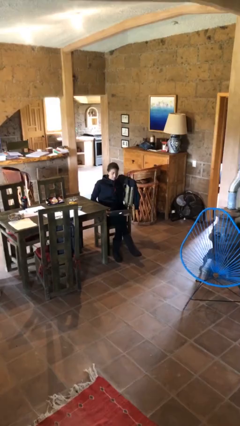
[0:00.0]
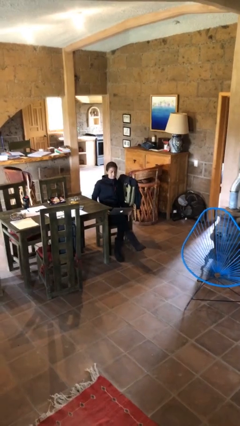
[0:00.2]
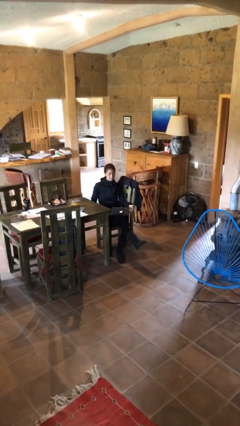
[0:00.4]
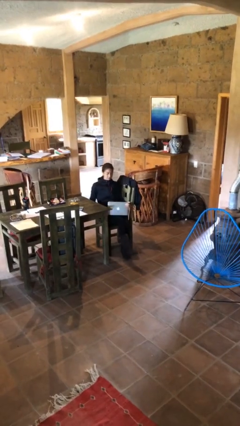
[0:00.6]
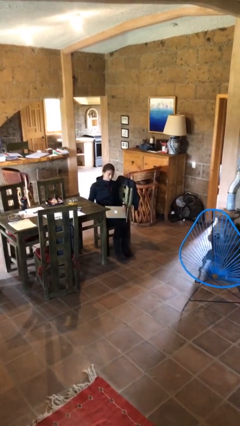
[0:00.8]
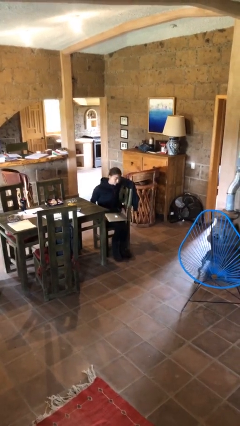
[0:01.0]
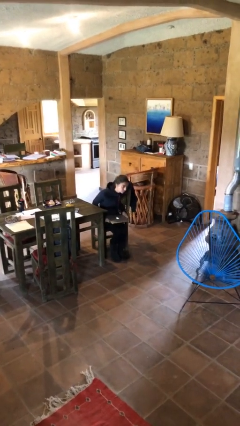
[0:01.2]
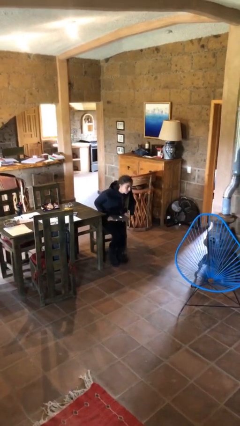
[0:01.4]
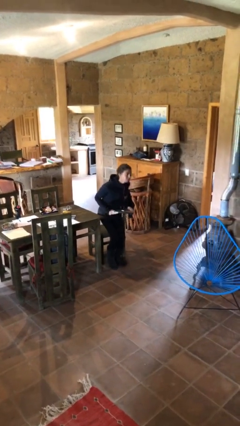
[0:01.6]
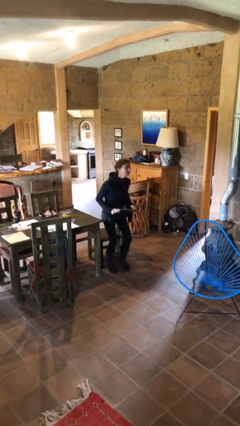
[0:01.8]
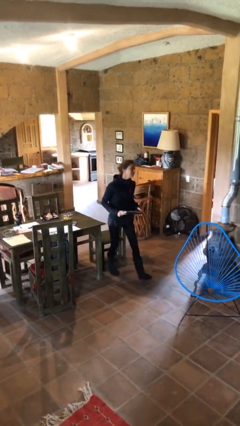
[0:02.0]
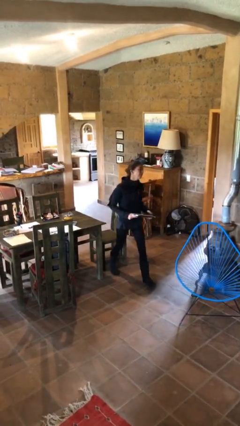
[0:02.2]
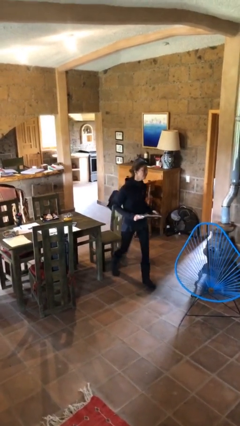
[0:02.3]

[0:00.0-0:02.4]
person stands up

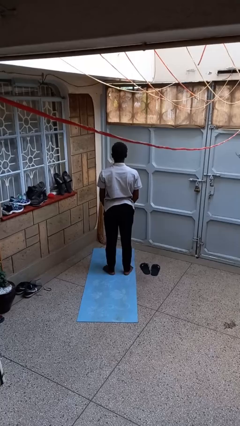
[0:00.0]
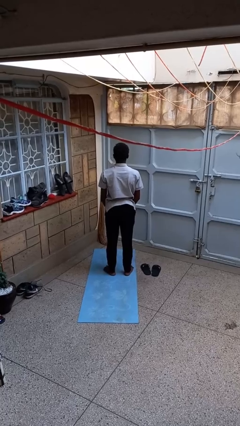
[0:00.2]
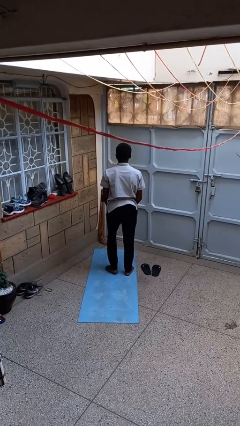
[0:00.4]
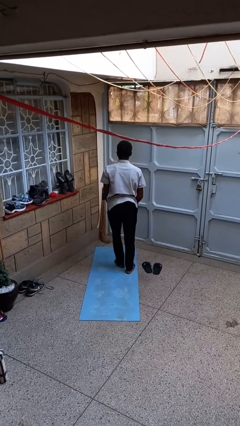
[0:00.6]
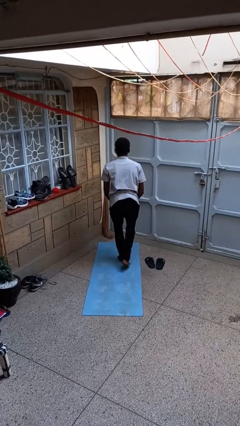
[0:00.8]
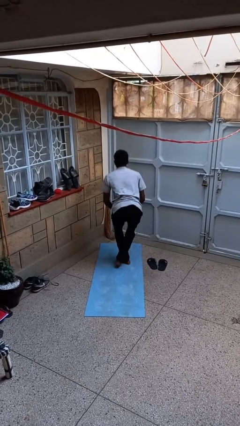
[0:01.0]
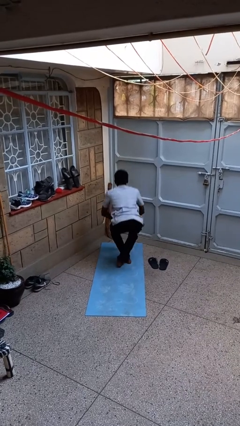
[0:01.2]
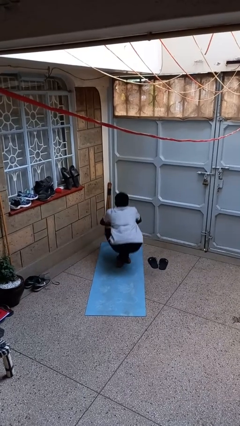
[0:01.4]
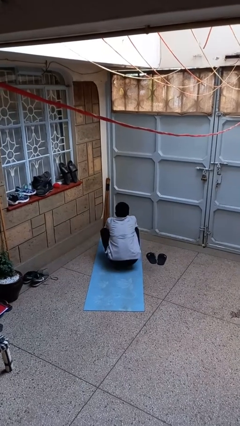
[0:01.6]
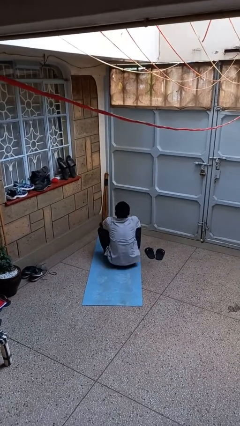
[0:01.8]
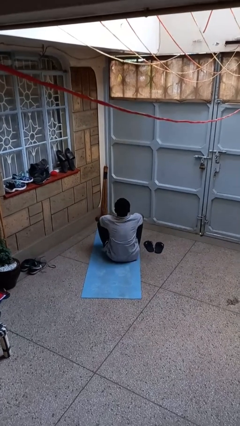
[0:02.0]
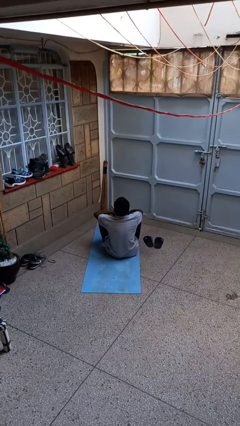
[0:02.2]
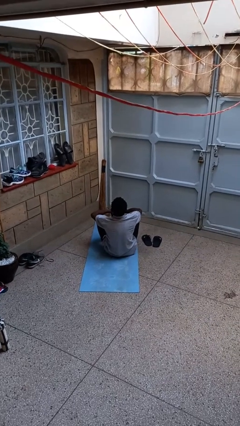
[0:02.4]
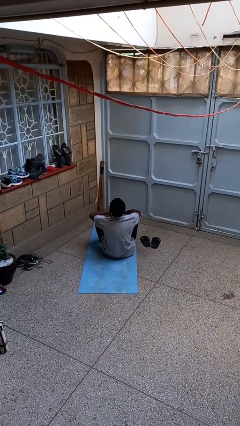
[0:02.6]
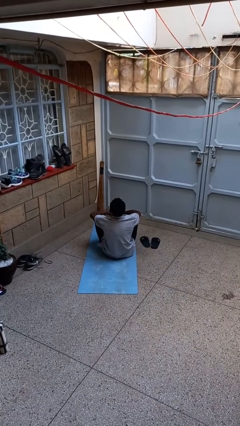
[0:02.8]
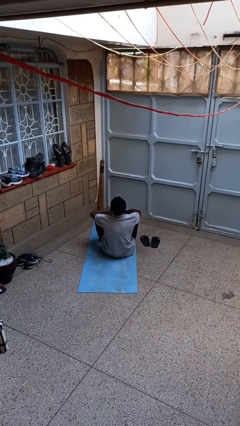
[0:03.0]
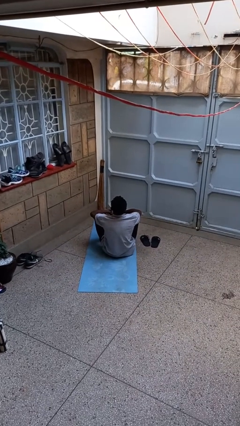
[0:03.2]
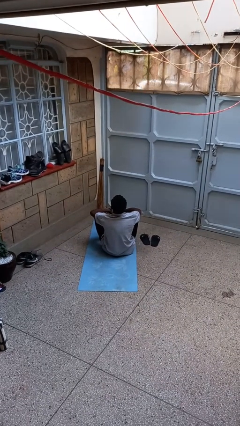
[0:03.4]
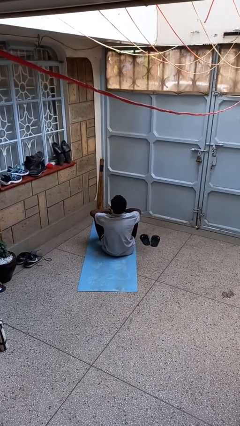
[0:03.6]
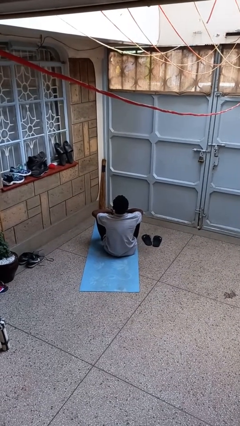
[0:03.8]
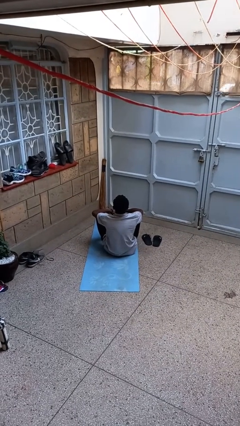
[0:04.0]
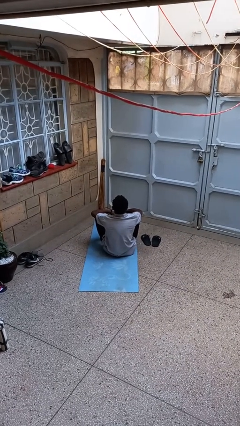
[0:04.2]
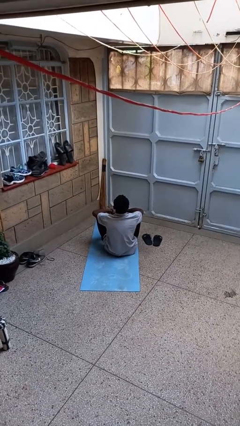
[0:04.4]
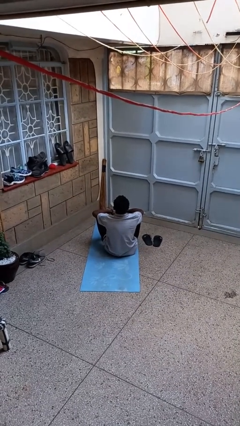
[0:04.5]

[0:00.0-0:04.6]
person sits crisscross

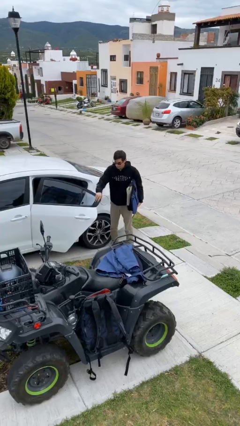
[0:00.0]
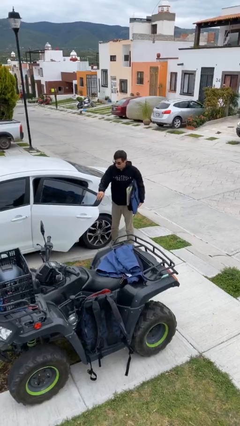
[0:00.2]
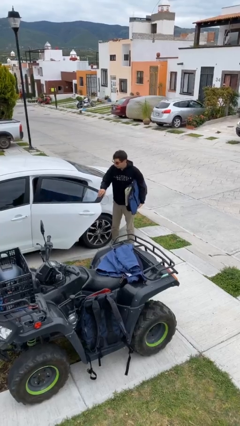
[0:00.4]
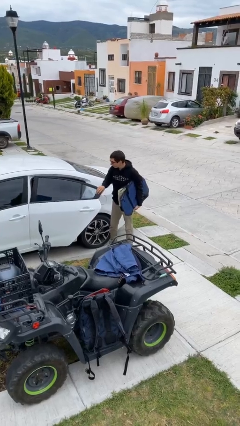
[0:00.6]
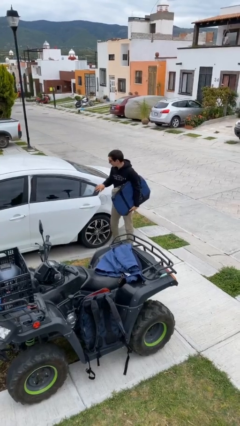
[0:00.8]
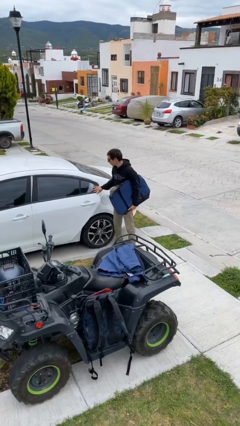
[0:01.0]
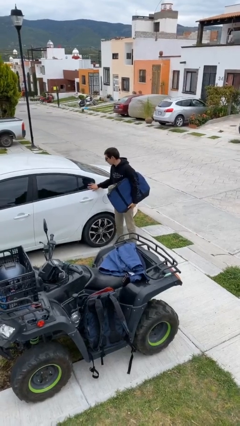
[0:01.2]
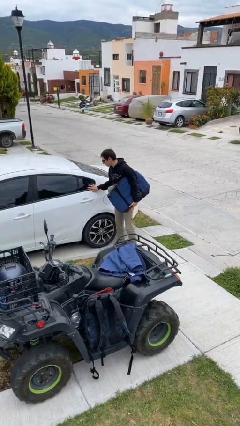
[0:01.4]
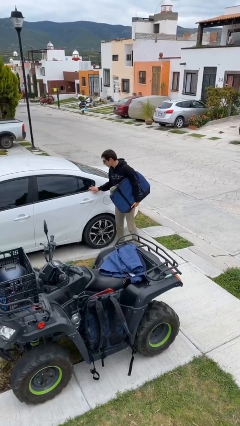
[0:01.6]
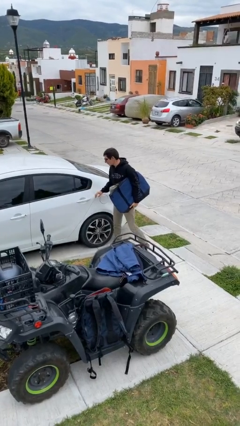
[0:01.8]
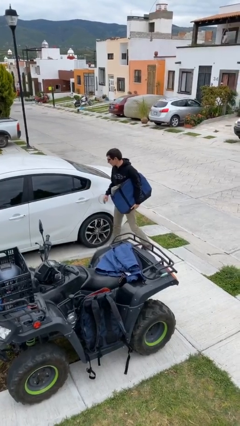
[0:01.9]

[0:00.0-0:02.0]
person closes car door

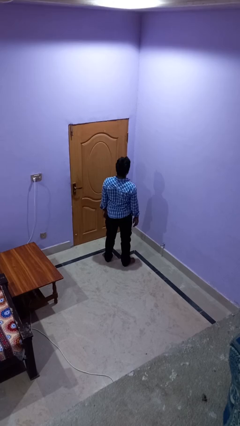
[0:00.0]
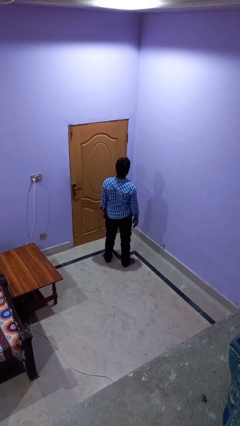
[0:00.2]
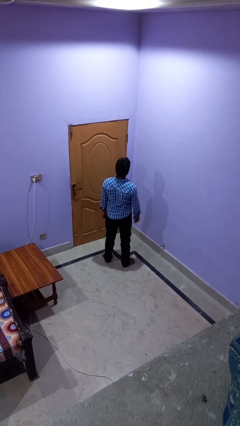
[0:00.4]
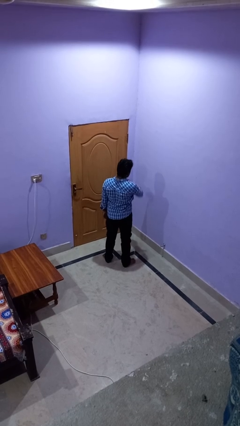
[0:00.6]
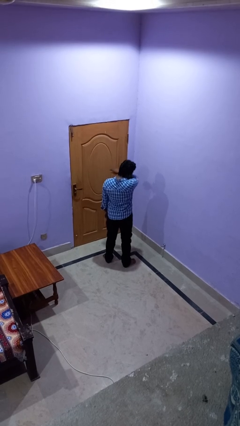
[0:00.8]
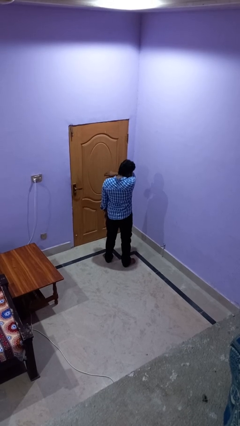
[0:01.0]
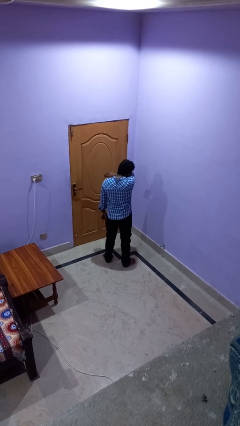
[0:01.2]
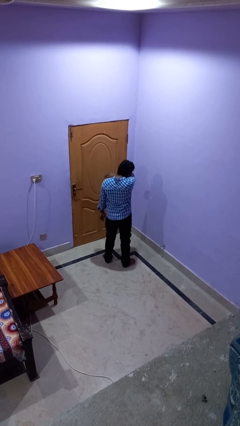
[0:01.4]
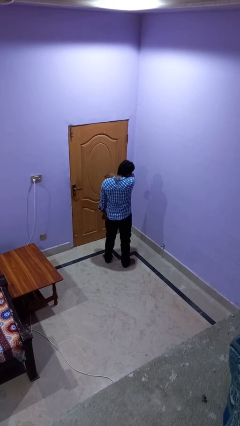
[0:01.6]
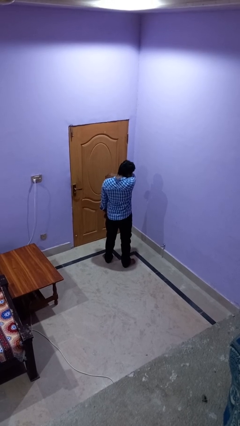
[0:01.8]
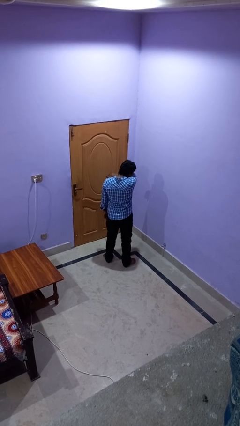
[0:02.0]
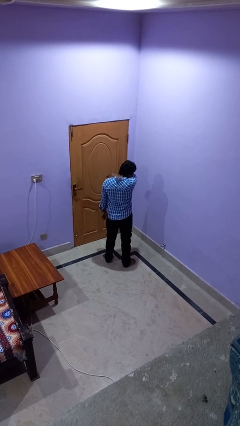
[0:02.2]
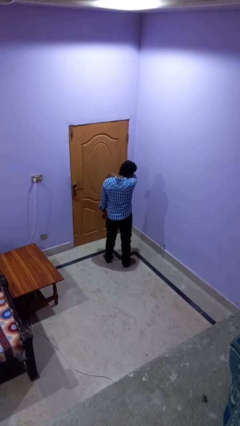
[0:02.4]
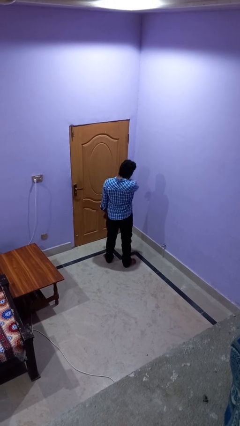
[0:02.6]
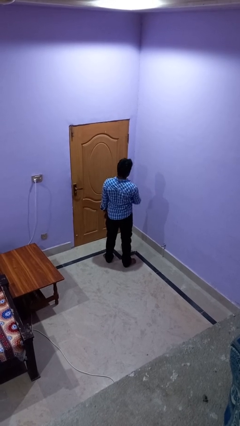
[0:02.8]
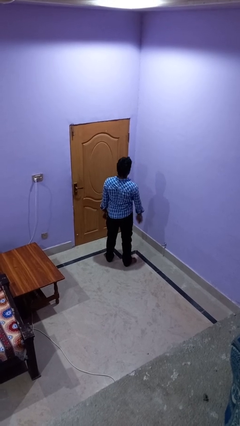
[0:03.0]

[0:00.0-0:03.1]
person sneezes into arm

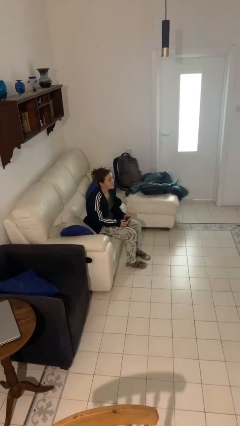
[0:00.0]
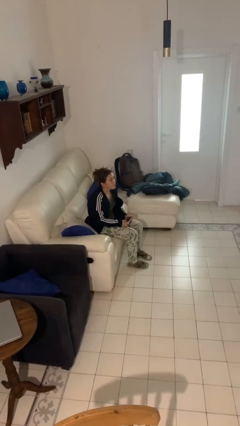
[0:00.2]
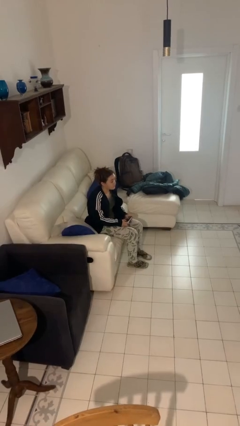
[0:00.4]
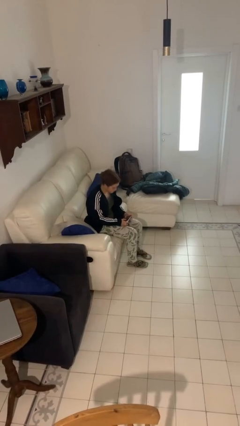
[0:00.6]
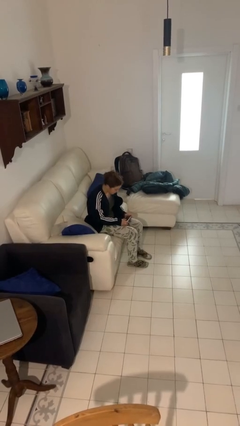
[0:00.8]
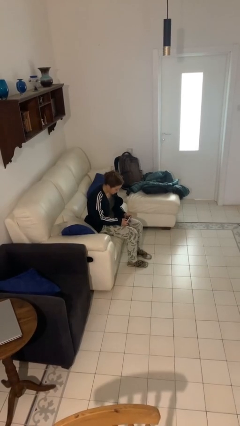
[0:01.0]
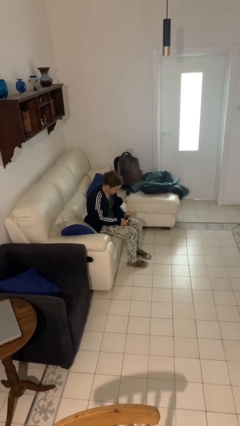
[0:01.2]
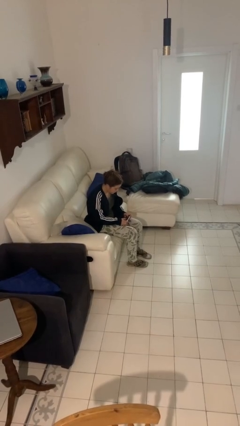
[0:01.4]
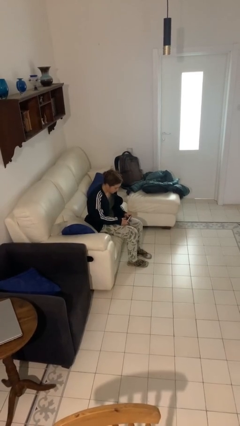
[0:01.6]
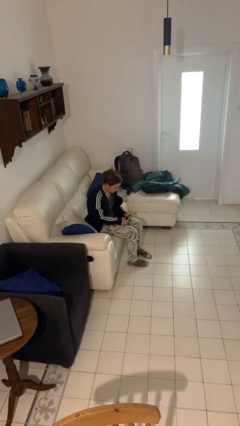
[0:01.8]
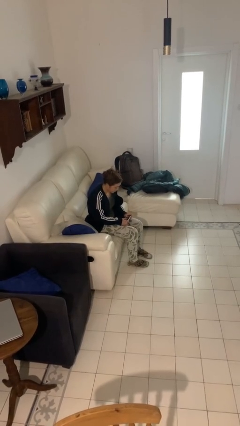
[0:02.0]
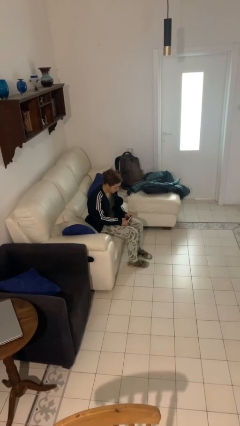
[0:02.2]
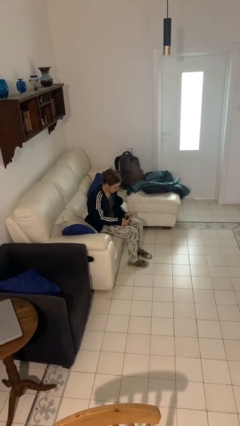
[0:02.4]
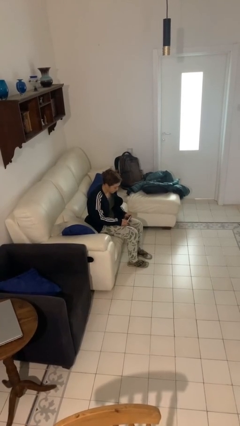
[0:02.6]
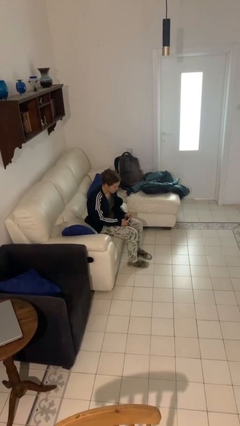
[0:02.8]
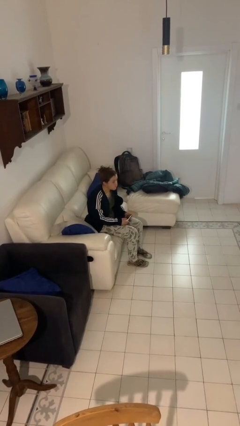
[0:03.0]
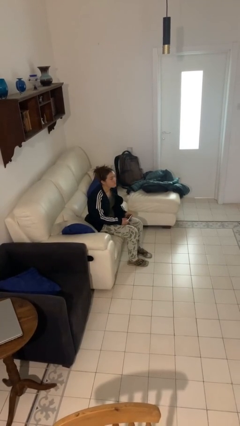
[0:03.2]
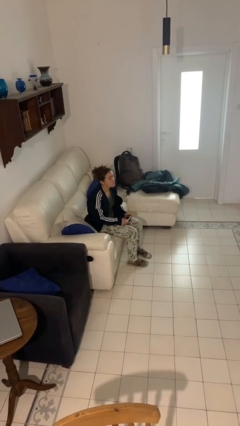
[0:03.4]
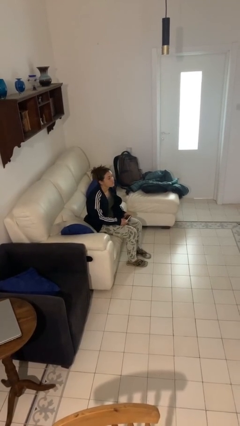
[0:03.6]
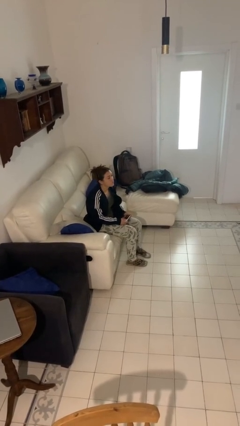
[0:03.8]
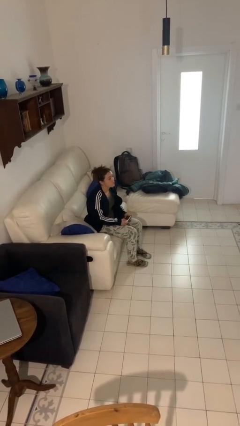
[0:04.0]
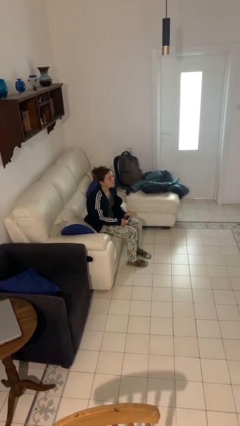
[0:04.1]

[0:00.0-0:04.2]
person interacts with handheld game

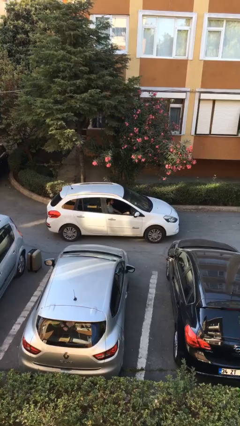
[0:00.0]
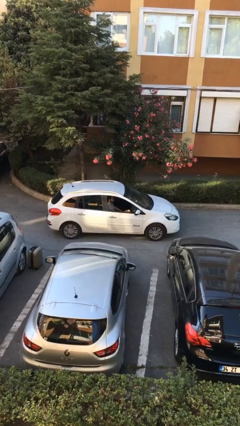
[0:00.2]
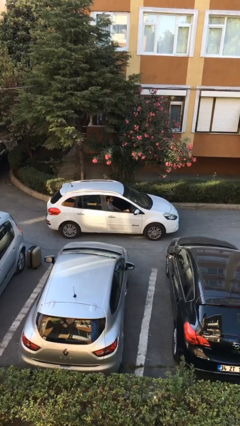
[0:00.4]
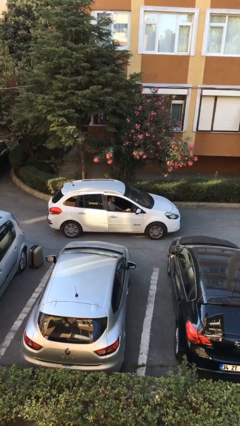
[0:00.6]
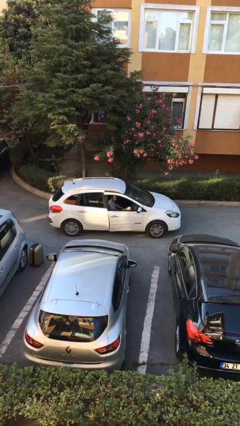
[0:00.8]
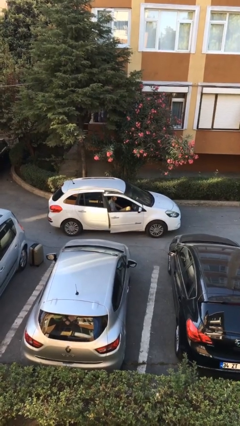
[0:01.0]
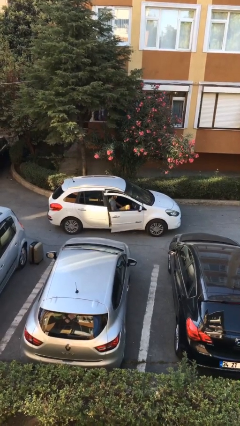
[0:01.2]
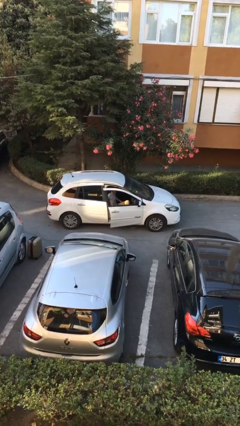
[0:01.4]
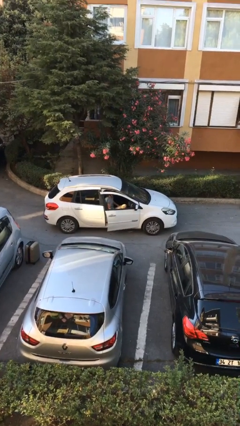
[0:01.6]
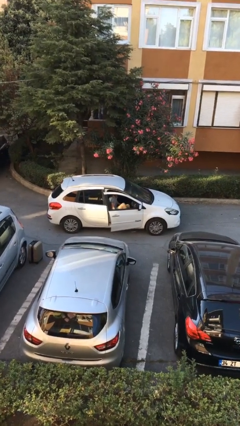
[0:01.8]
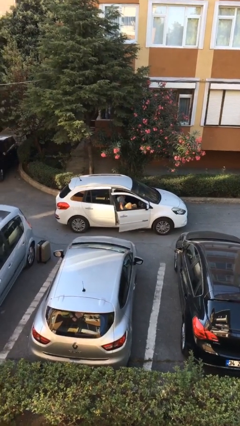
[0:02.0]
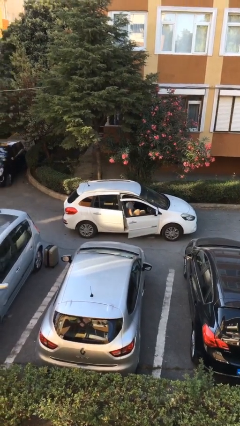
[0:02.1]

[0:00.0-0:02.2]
person opens car door
